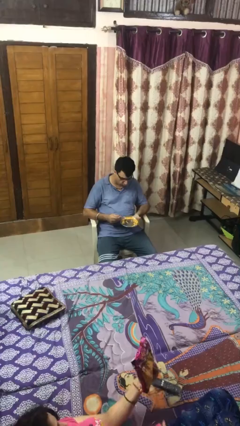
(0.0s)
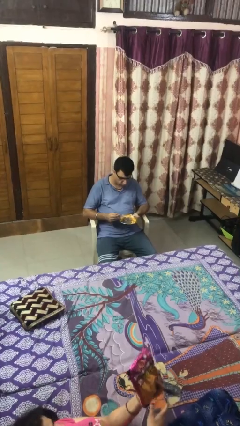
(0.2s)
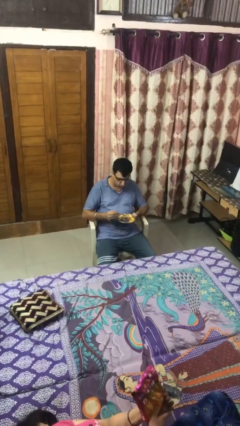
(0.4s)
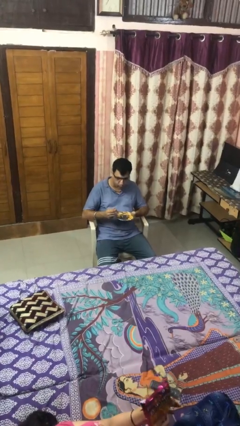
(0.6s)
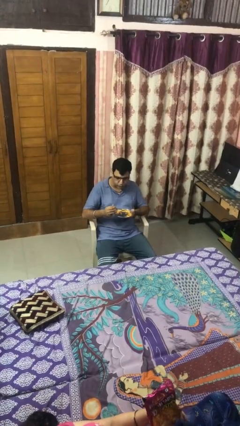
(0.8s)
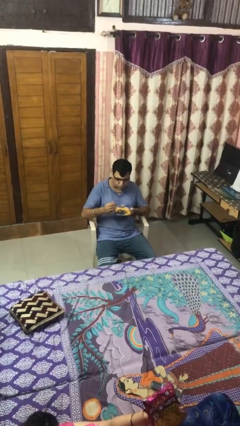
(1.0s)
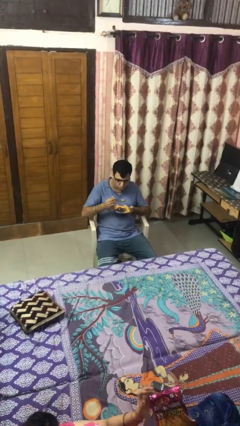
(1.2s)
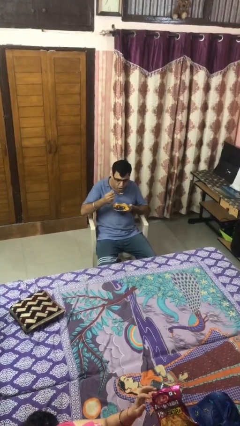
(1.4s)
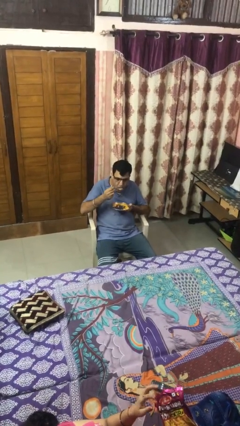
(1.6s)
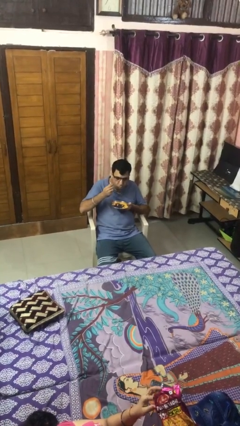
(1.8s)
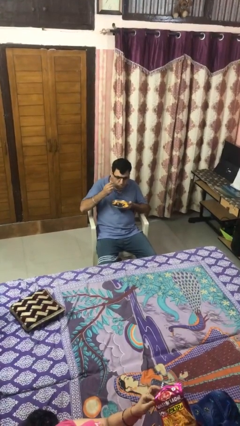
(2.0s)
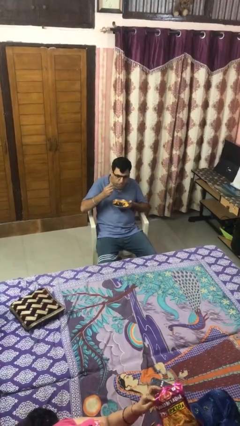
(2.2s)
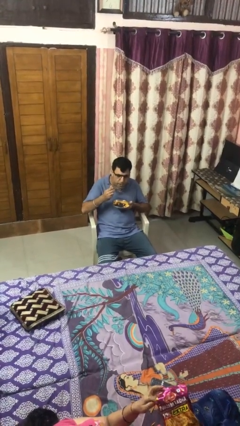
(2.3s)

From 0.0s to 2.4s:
person eats with utensil

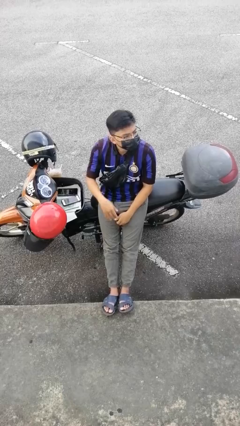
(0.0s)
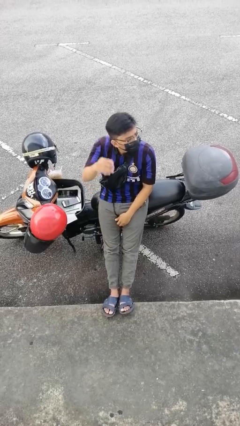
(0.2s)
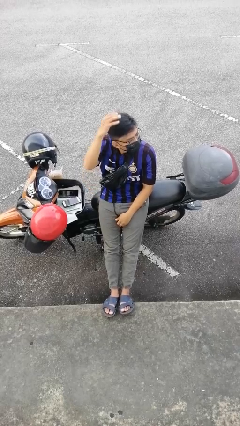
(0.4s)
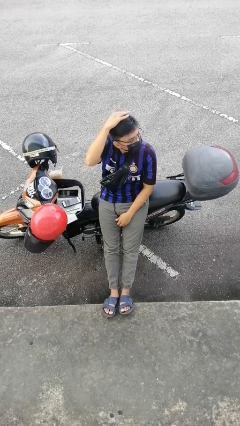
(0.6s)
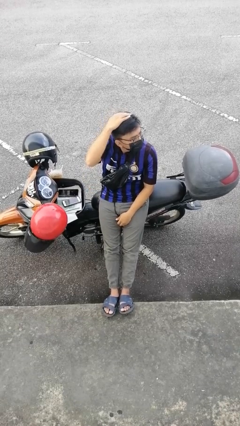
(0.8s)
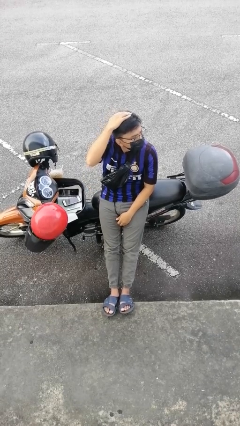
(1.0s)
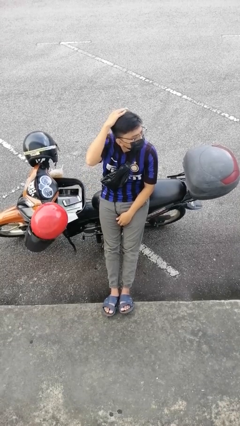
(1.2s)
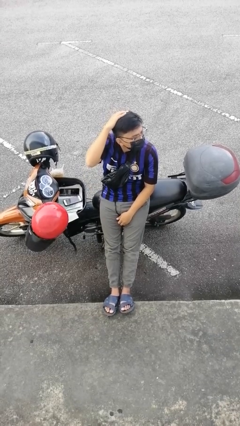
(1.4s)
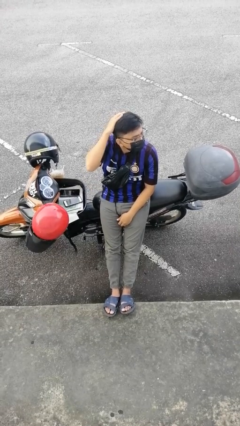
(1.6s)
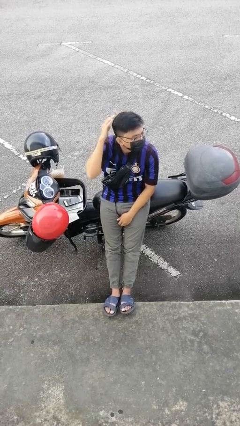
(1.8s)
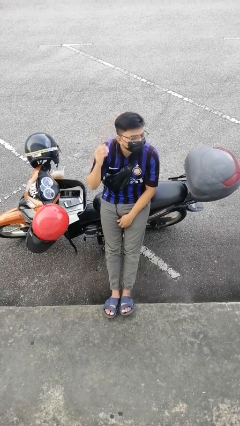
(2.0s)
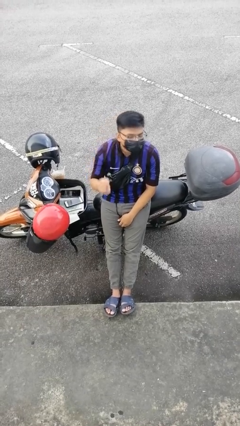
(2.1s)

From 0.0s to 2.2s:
person pats head

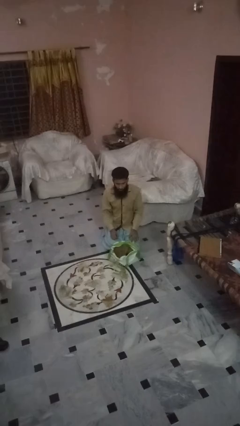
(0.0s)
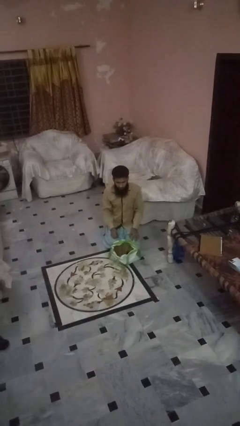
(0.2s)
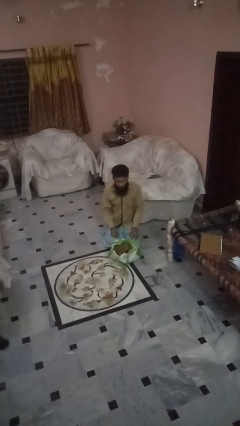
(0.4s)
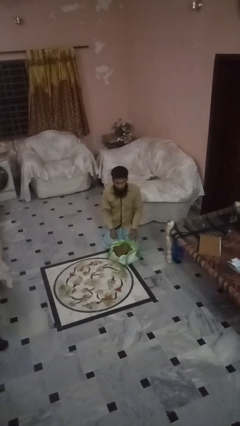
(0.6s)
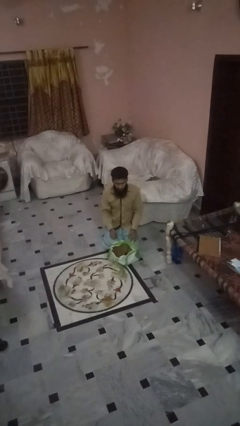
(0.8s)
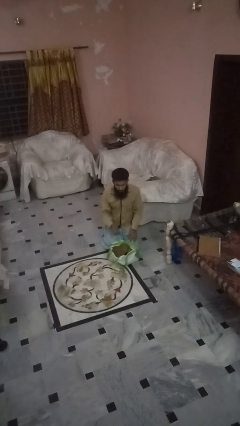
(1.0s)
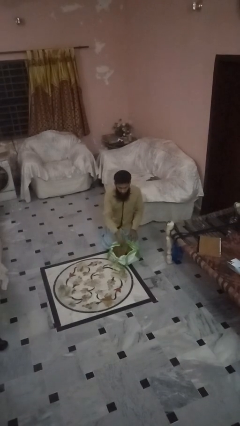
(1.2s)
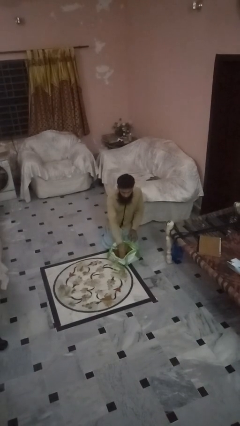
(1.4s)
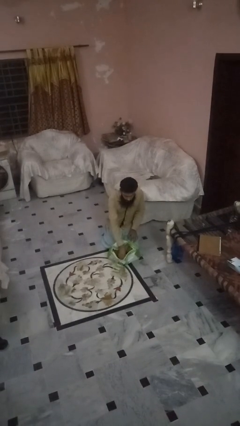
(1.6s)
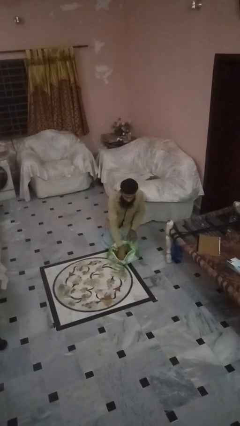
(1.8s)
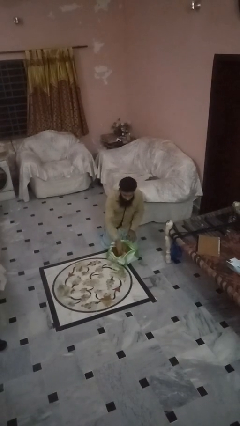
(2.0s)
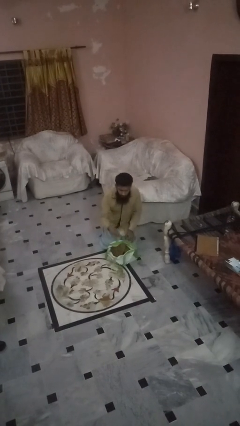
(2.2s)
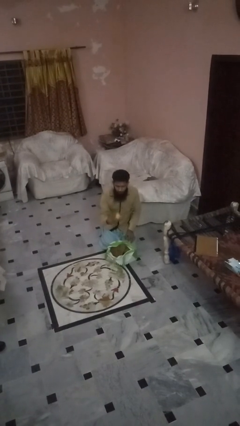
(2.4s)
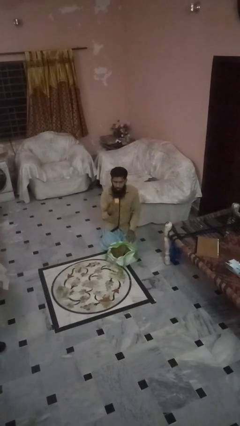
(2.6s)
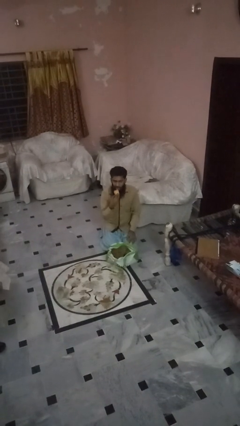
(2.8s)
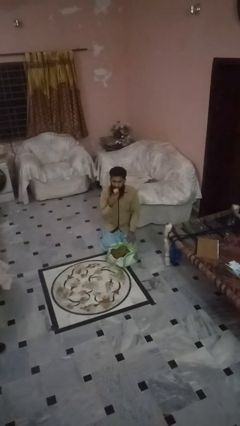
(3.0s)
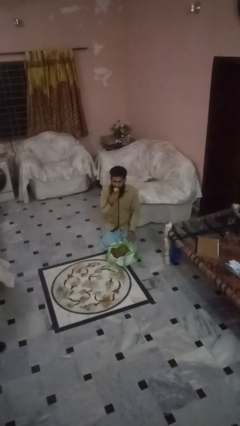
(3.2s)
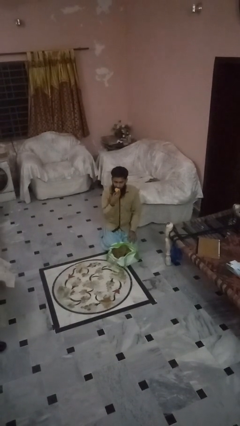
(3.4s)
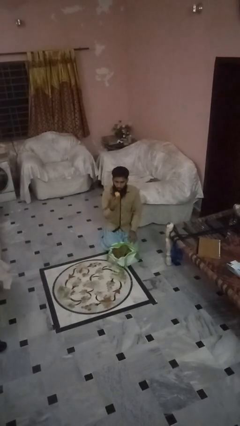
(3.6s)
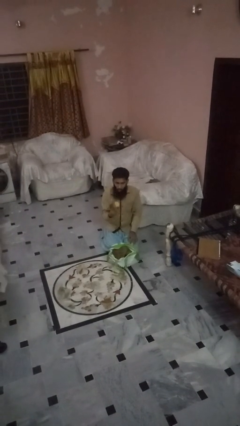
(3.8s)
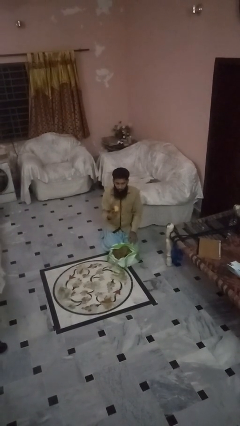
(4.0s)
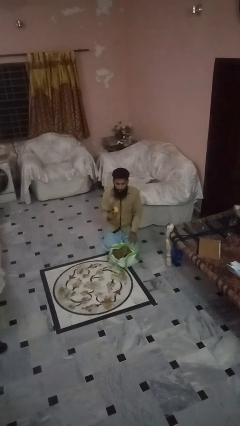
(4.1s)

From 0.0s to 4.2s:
person eats snack from bag

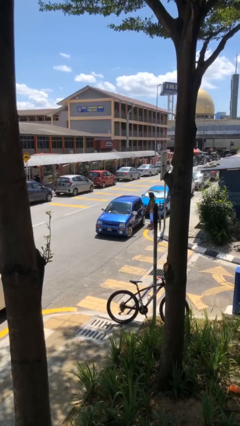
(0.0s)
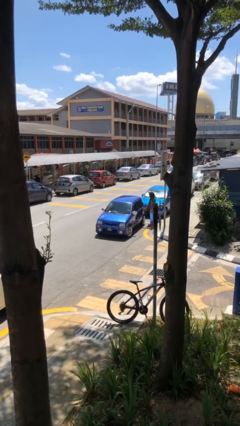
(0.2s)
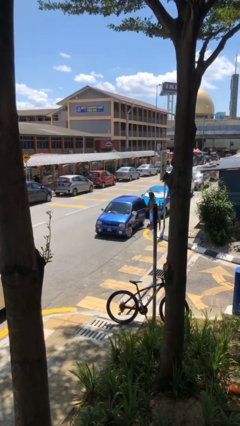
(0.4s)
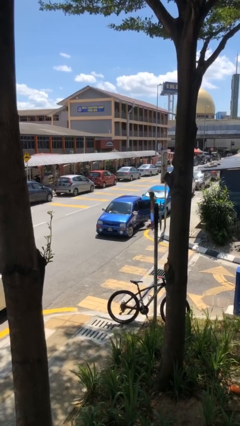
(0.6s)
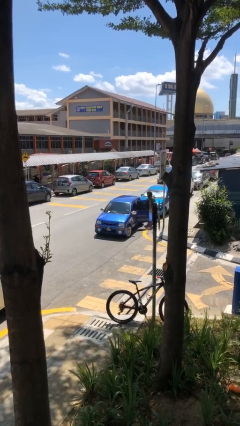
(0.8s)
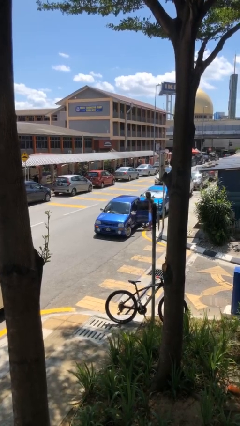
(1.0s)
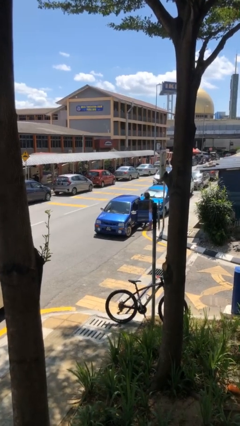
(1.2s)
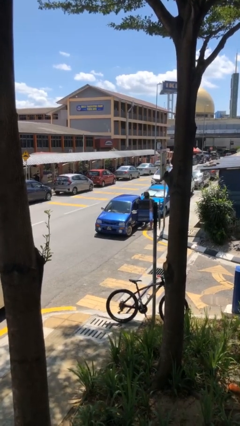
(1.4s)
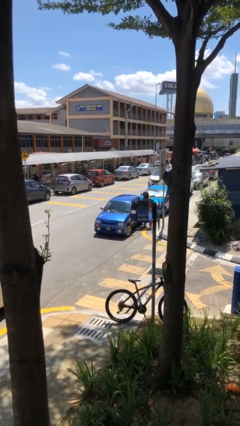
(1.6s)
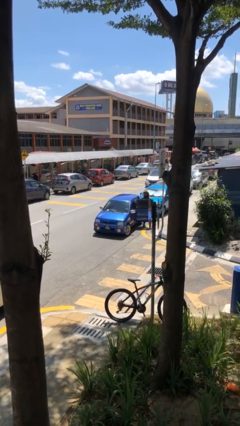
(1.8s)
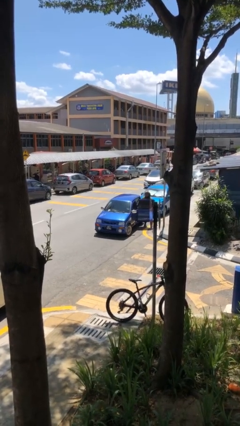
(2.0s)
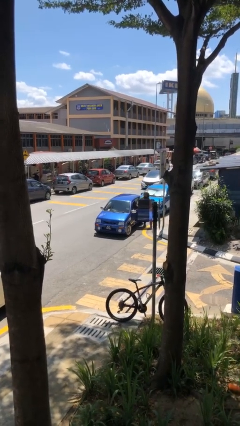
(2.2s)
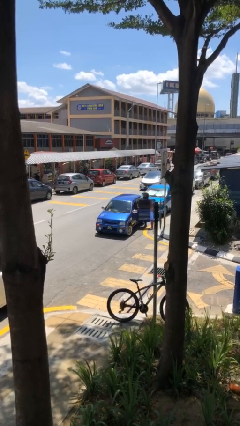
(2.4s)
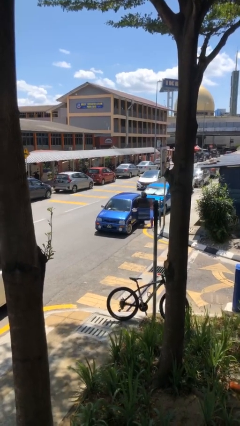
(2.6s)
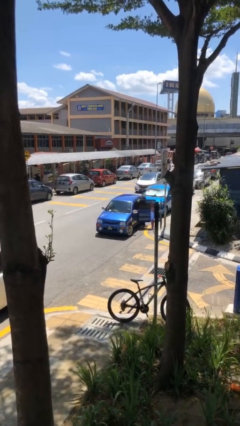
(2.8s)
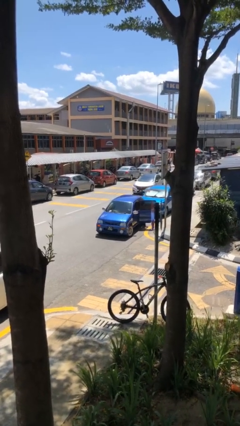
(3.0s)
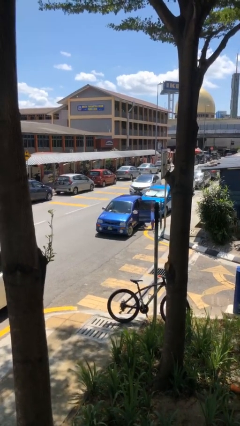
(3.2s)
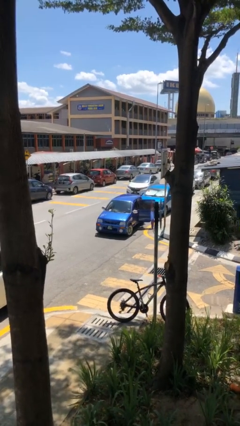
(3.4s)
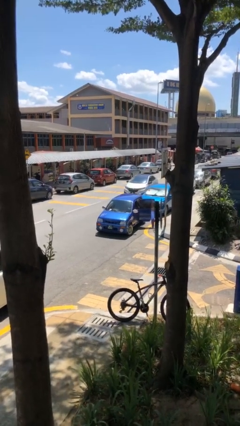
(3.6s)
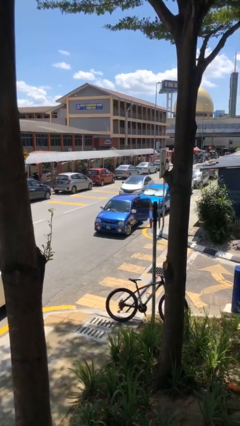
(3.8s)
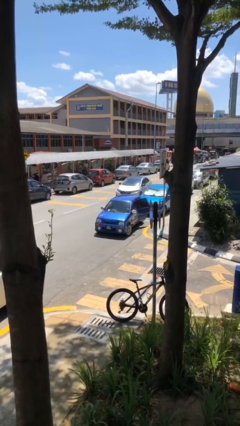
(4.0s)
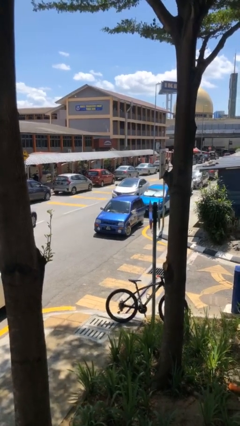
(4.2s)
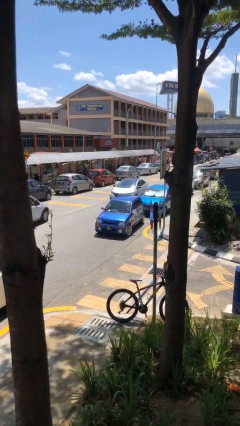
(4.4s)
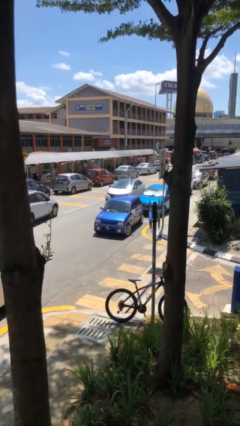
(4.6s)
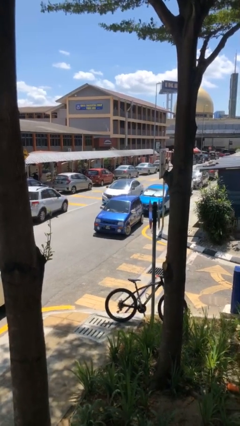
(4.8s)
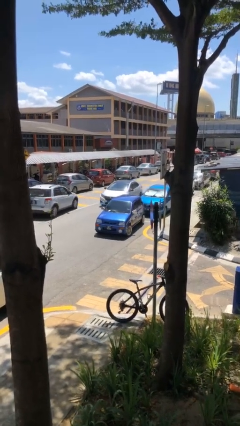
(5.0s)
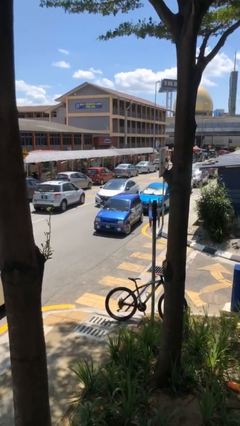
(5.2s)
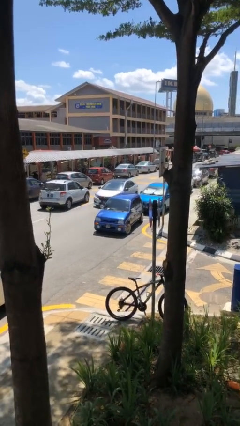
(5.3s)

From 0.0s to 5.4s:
car picks up person

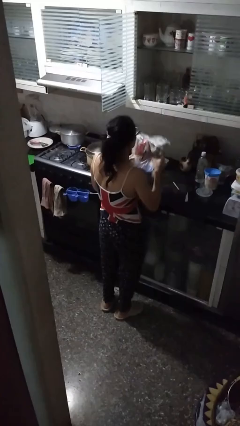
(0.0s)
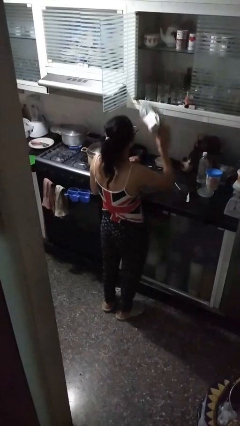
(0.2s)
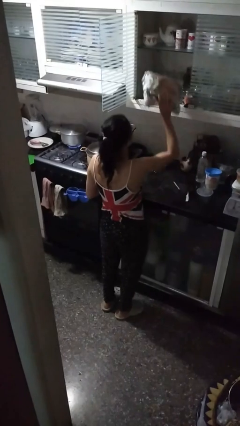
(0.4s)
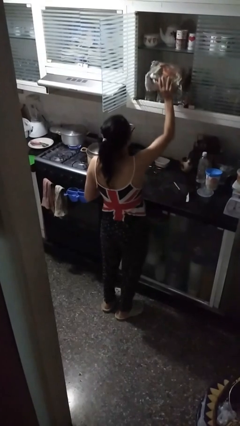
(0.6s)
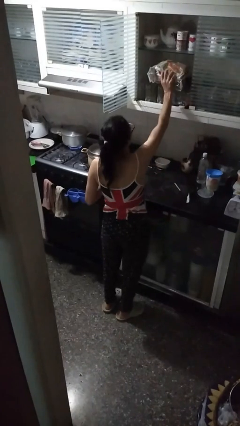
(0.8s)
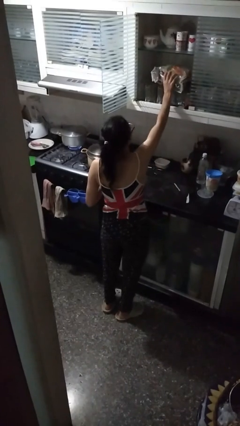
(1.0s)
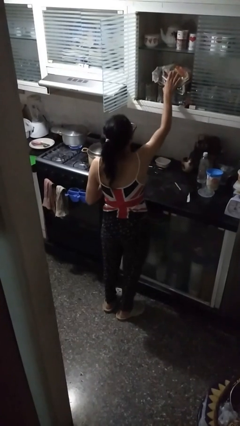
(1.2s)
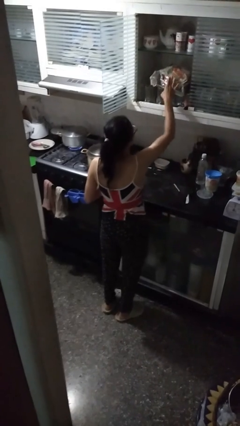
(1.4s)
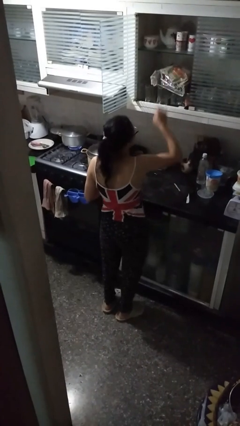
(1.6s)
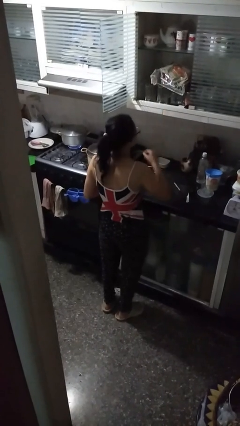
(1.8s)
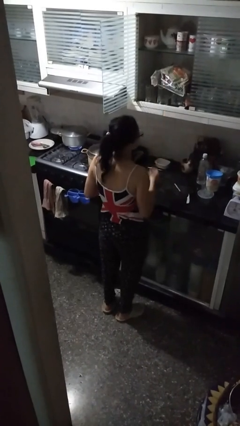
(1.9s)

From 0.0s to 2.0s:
person puts down object into cabinet

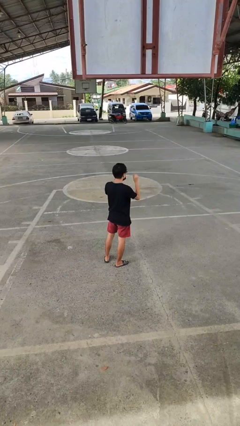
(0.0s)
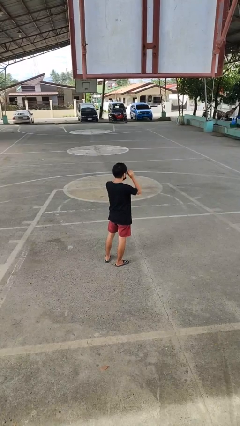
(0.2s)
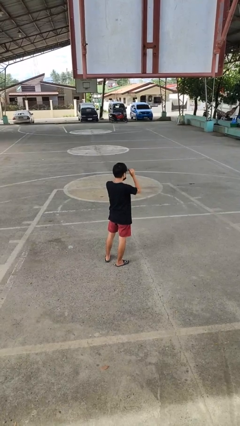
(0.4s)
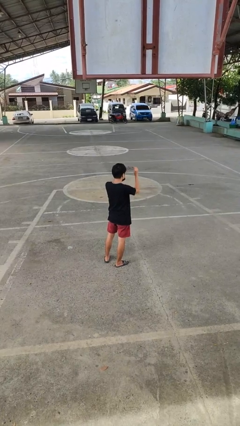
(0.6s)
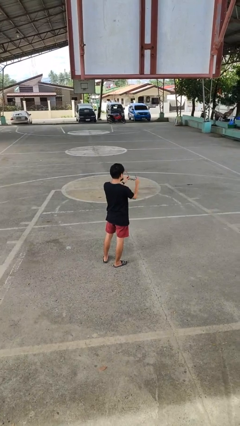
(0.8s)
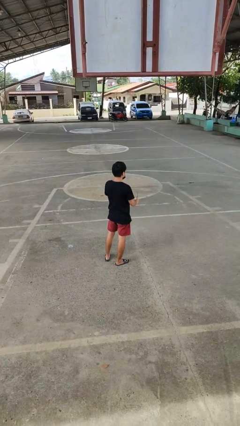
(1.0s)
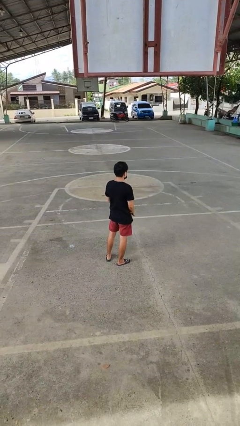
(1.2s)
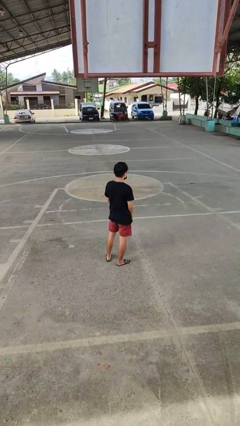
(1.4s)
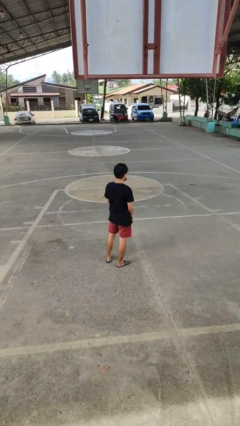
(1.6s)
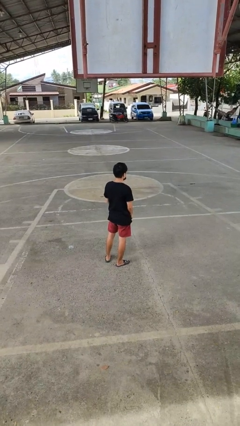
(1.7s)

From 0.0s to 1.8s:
person takes off glasses
